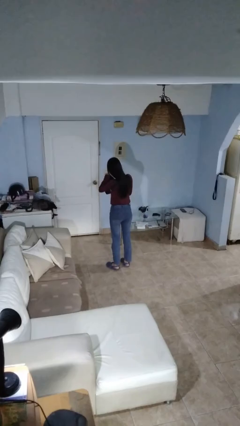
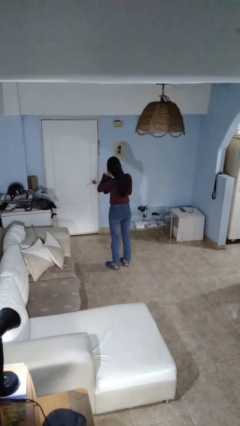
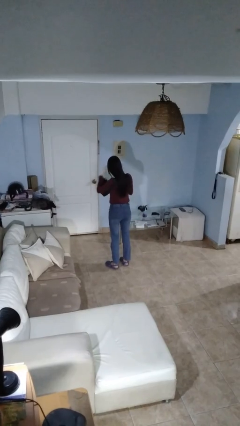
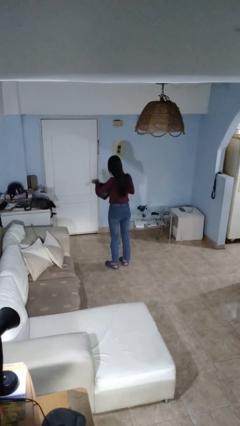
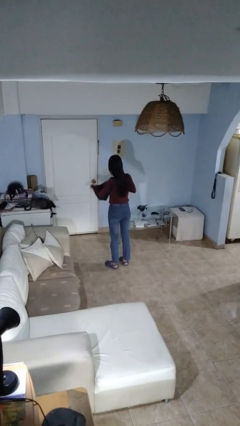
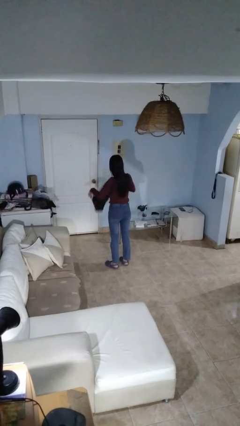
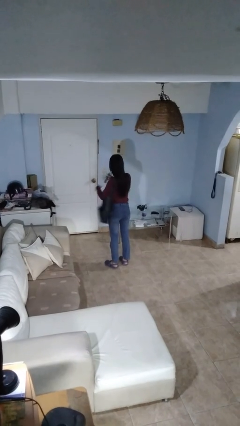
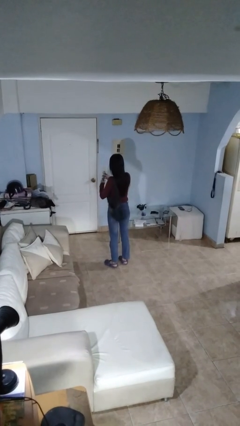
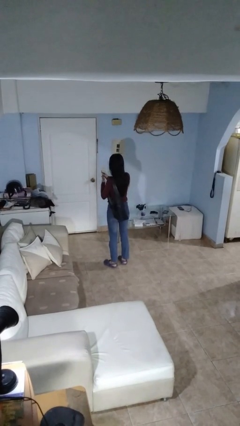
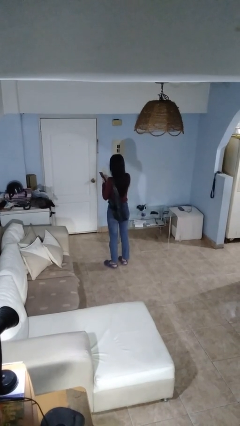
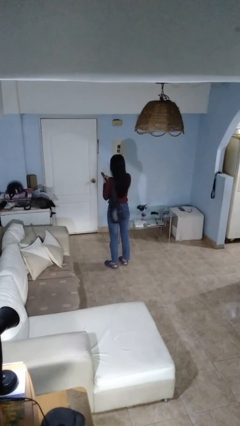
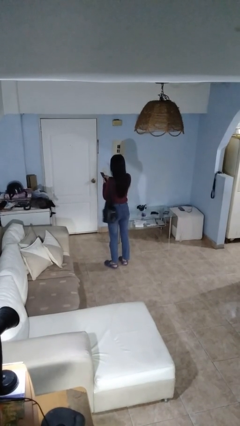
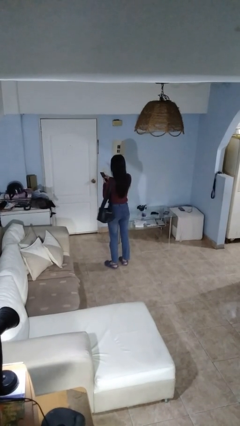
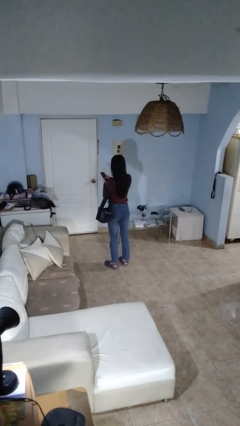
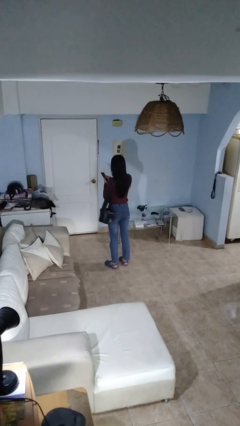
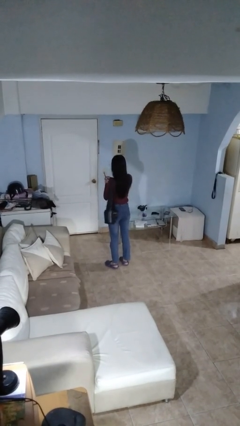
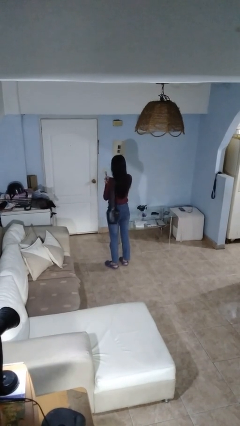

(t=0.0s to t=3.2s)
person takes object from purse

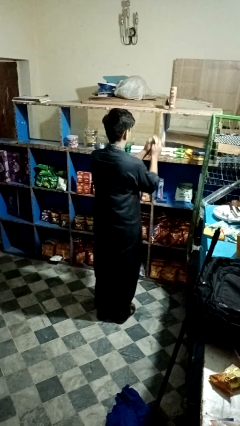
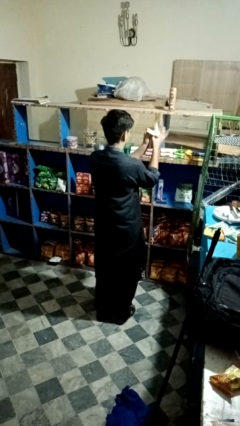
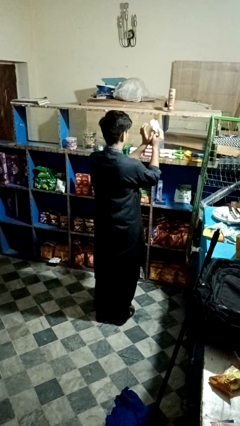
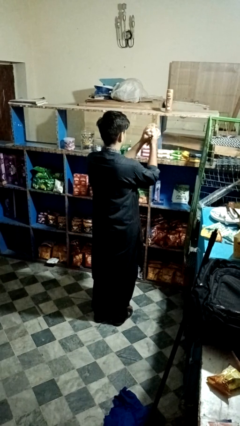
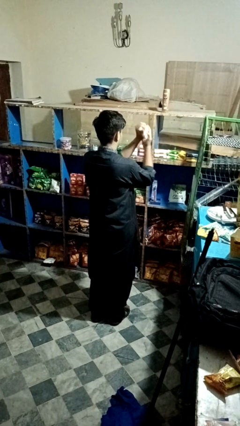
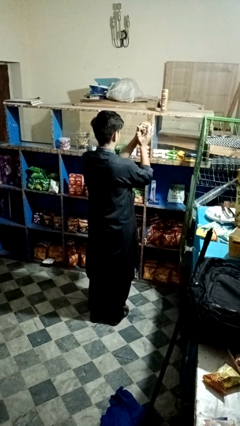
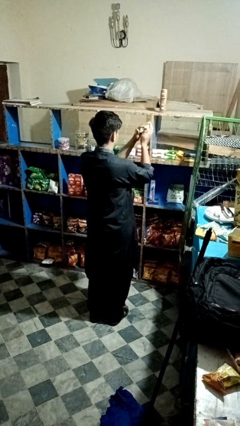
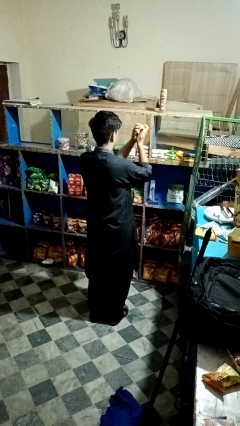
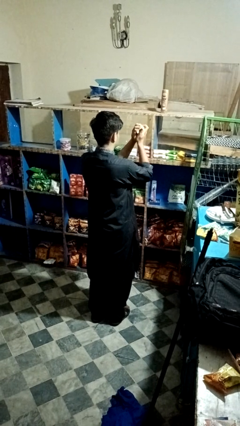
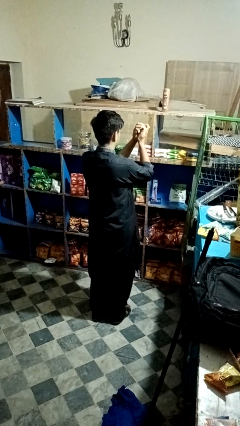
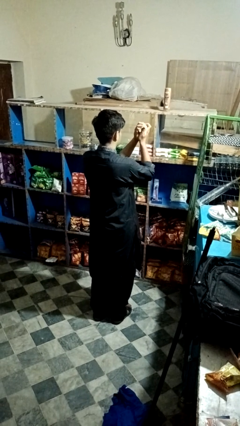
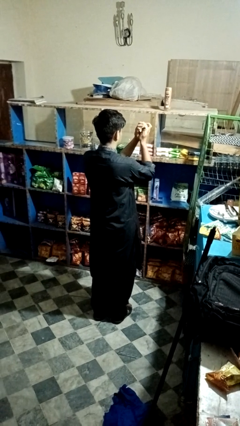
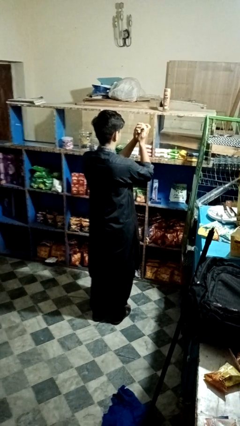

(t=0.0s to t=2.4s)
person crumples paper

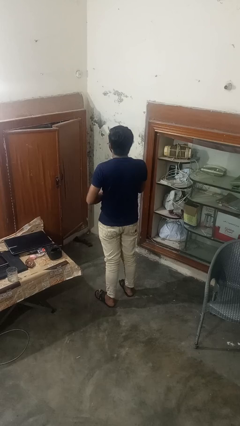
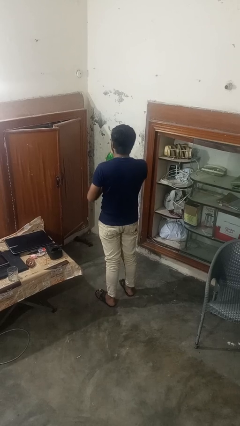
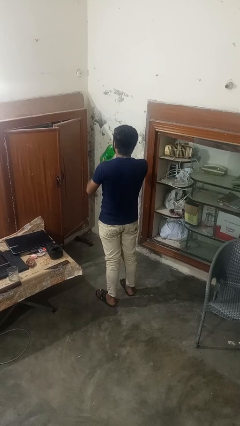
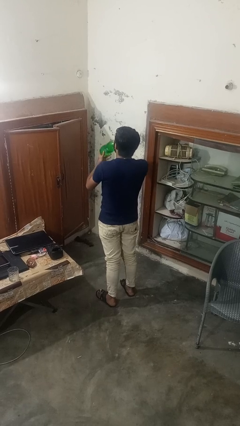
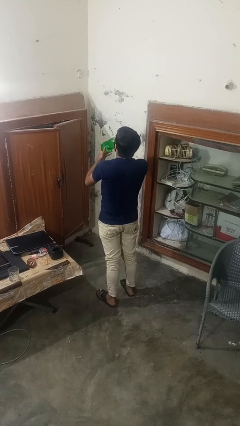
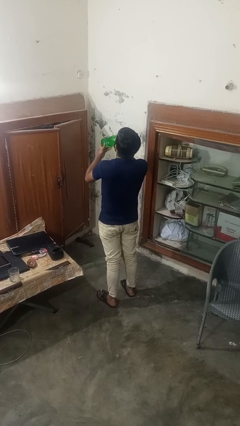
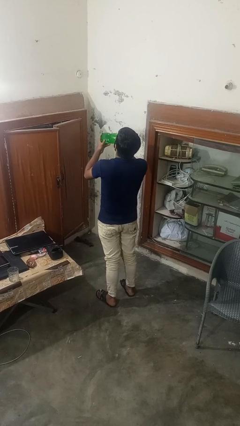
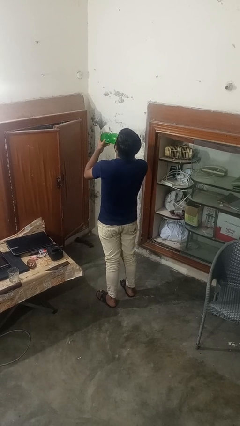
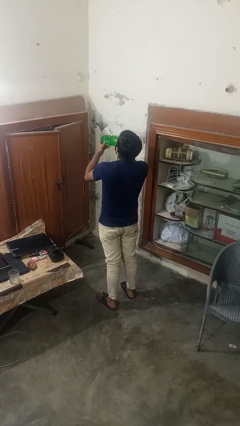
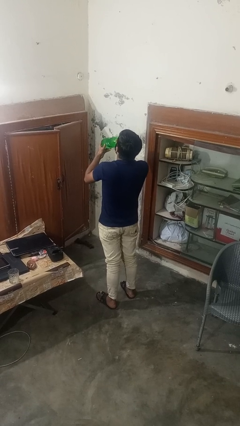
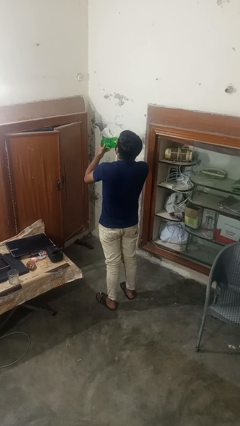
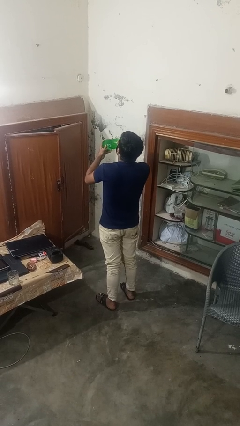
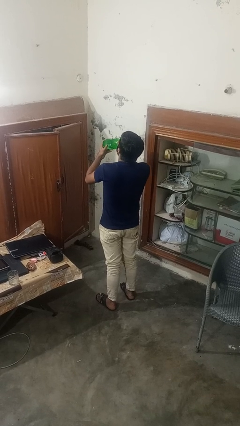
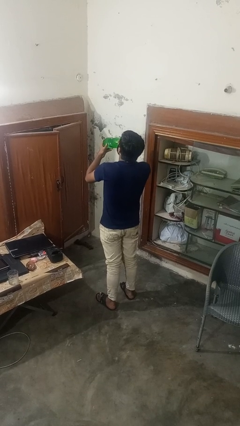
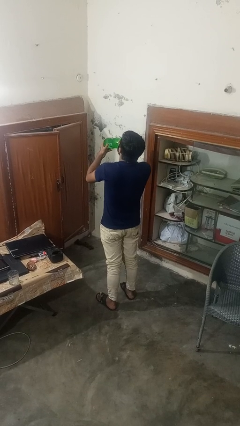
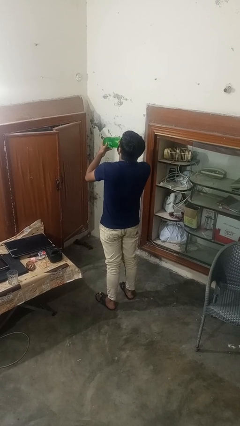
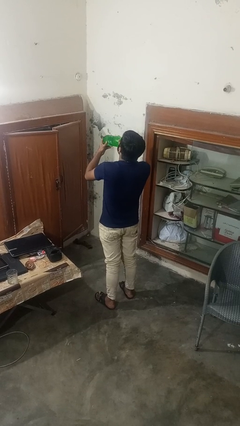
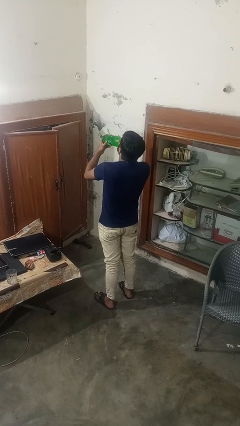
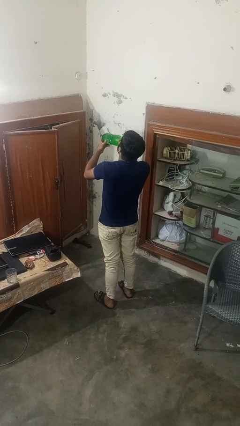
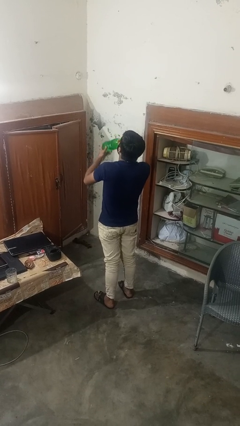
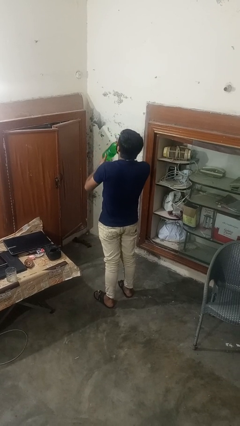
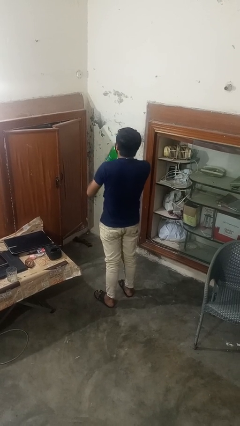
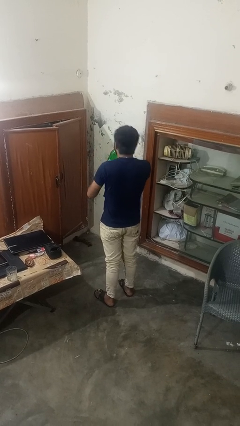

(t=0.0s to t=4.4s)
person drinks from bottle

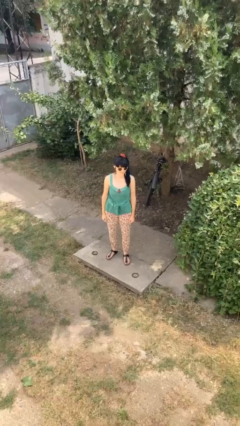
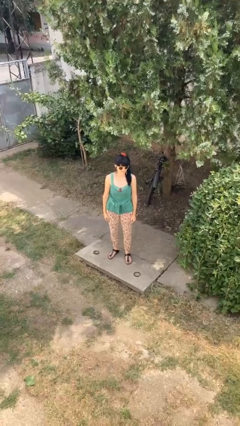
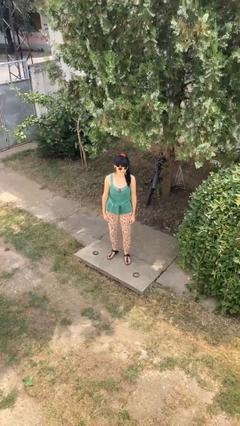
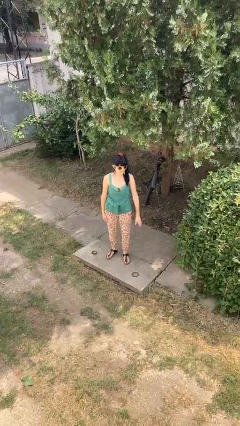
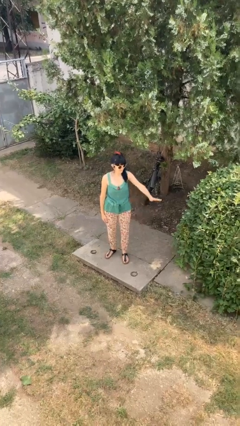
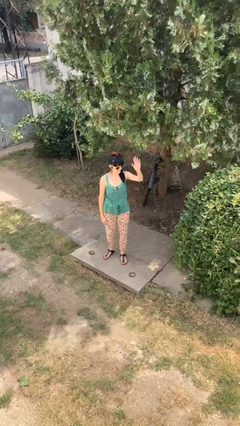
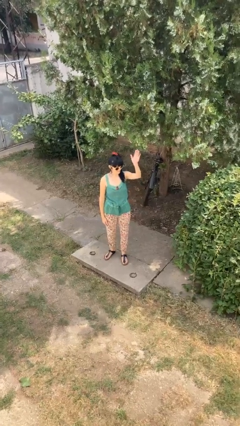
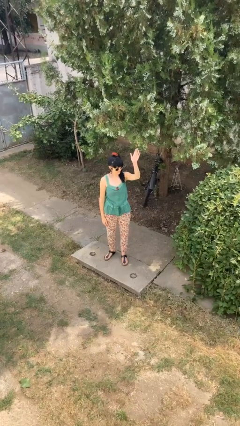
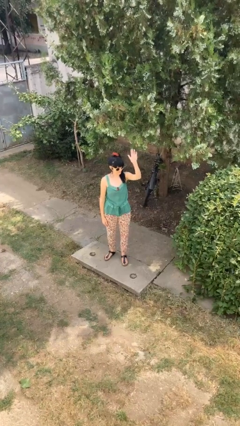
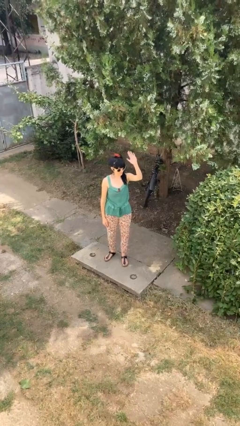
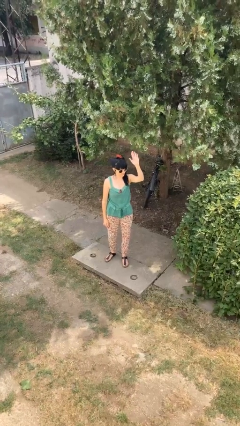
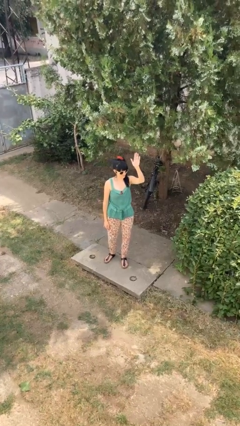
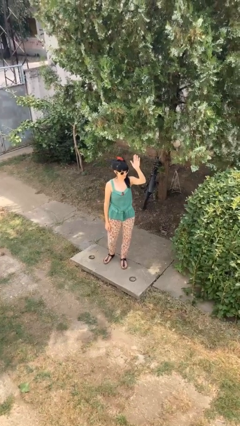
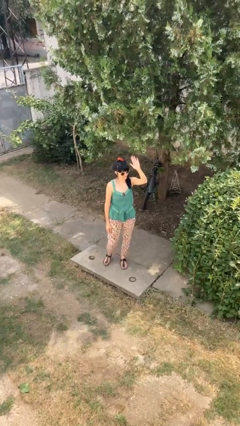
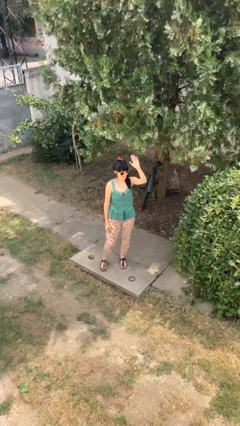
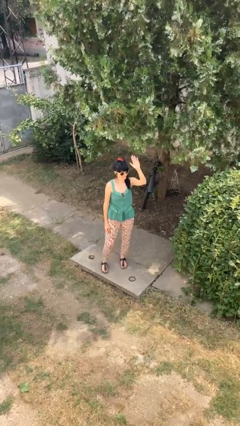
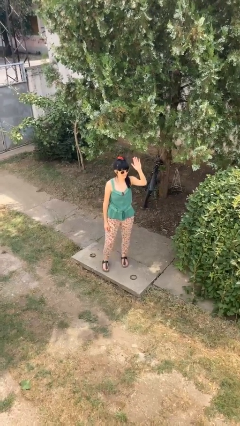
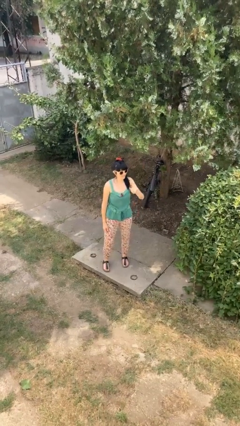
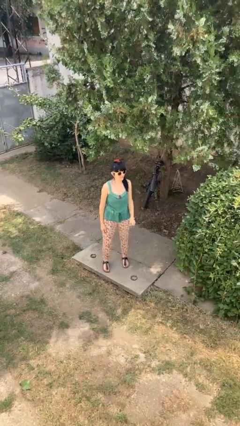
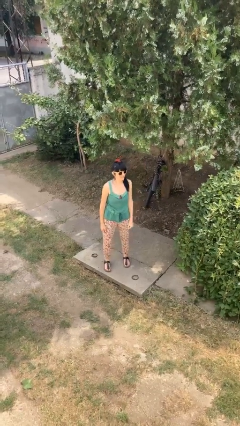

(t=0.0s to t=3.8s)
person waves at person

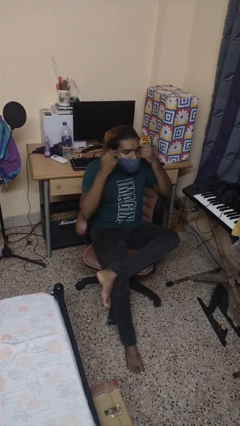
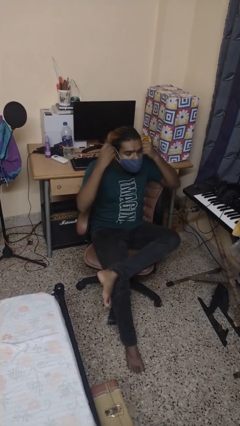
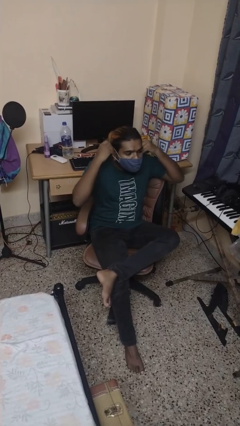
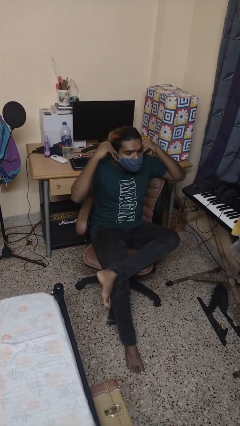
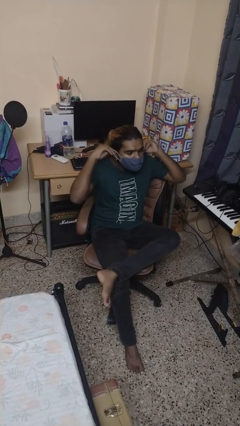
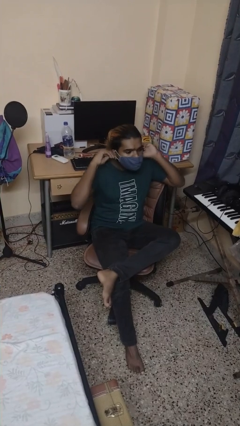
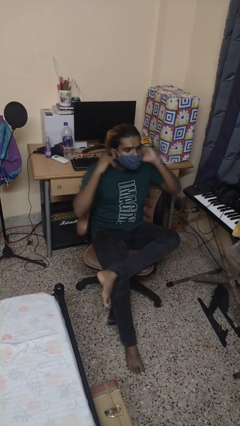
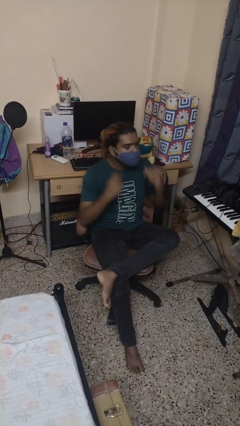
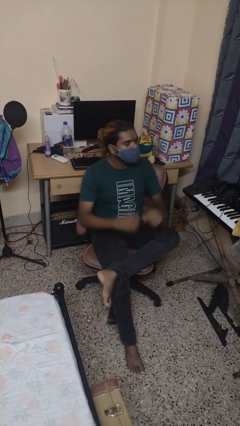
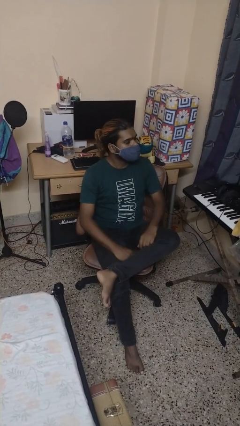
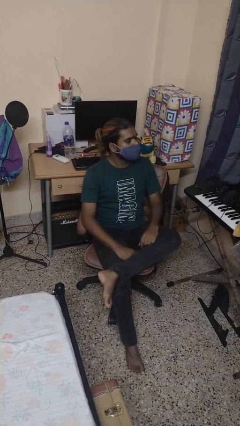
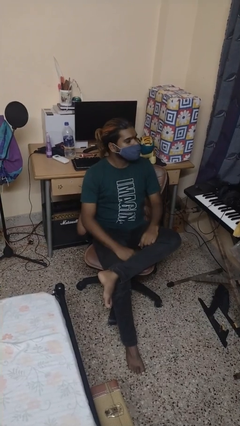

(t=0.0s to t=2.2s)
person puts on facemask

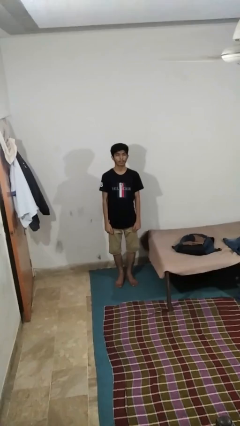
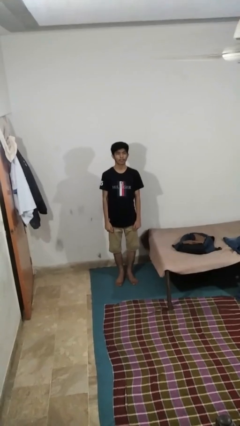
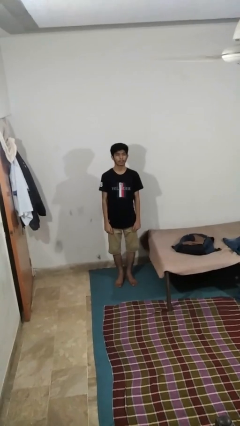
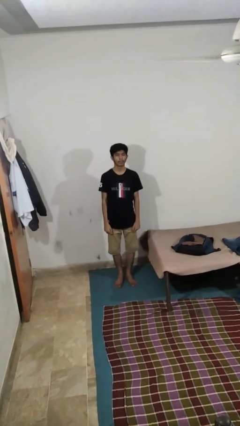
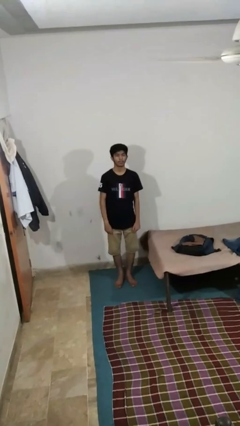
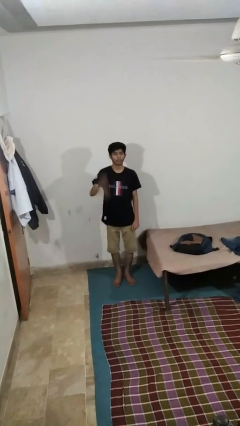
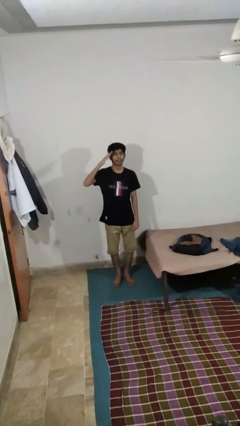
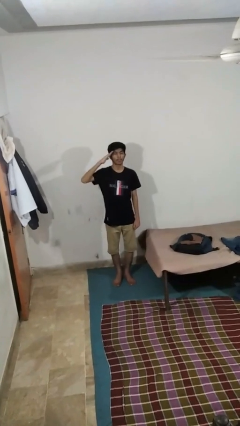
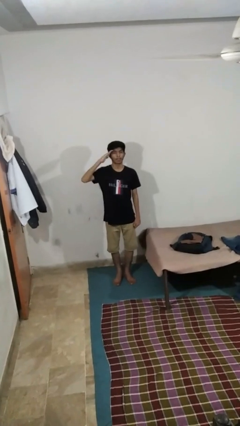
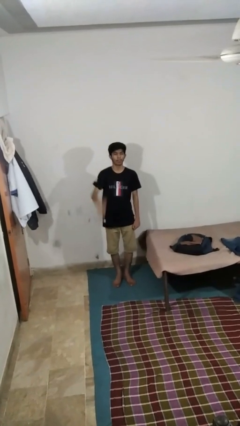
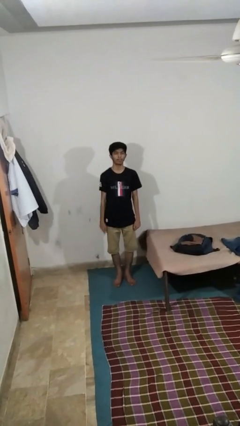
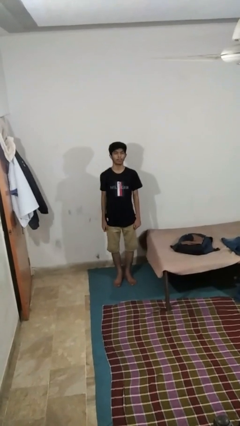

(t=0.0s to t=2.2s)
person salutes
